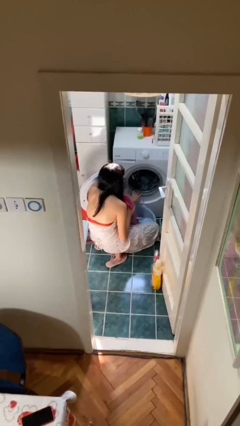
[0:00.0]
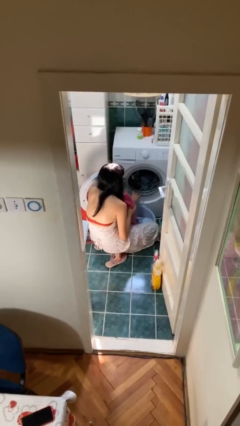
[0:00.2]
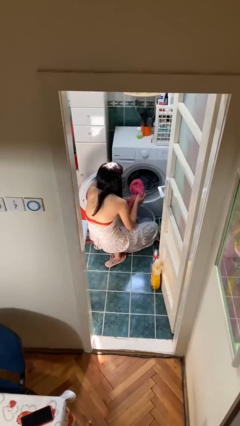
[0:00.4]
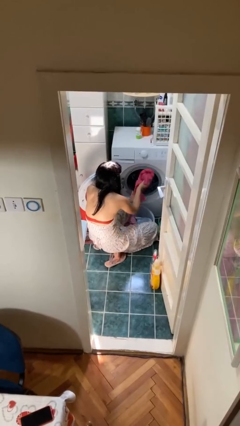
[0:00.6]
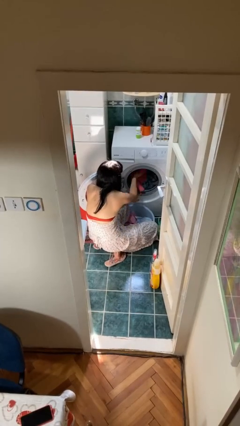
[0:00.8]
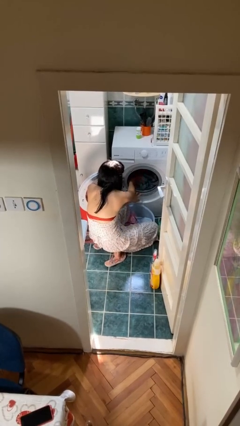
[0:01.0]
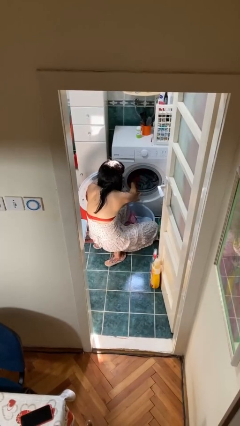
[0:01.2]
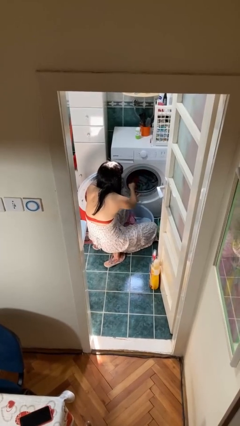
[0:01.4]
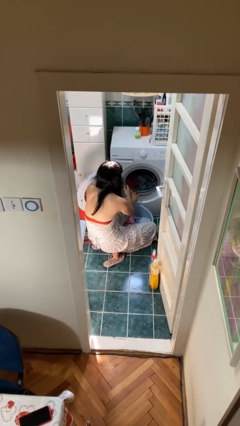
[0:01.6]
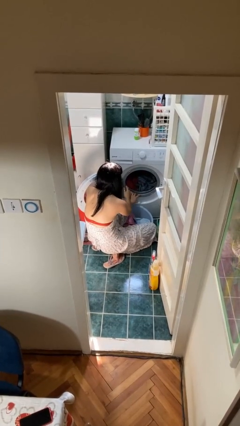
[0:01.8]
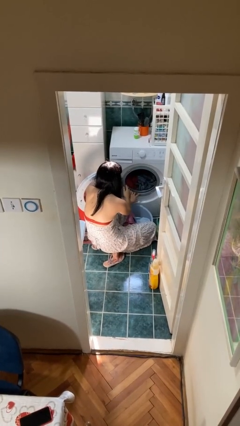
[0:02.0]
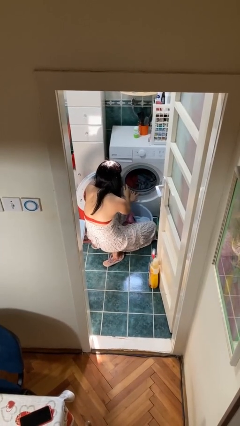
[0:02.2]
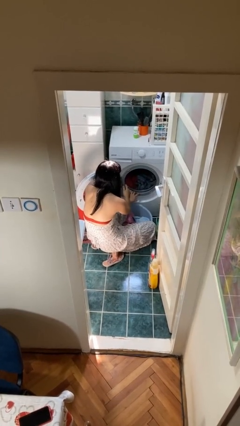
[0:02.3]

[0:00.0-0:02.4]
person loads clotheswasher

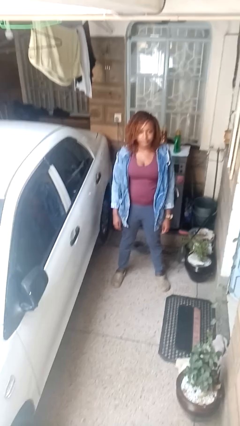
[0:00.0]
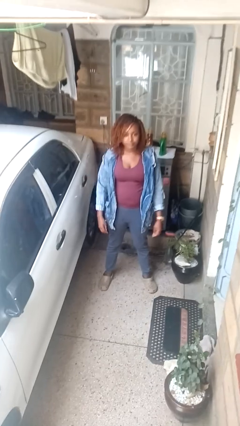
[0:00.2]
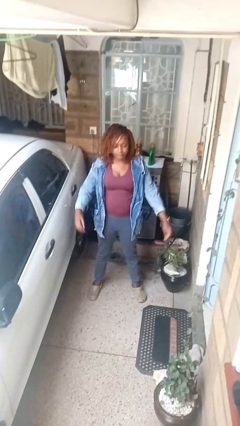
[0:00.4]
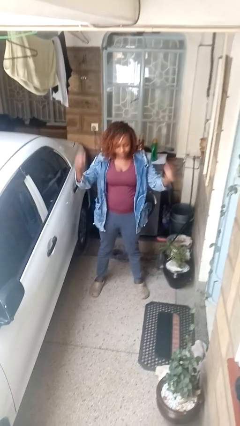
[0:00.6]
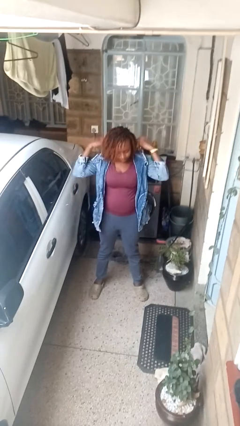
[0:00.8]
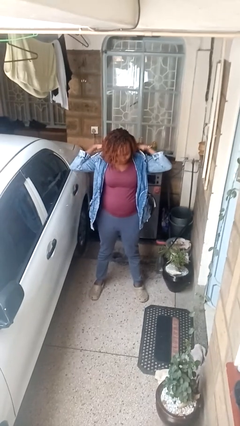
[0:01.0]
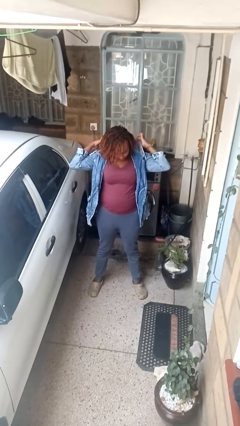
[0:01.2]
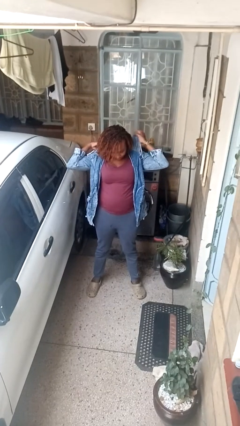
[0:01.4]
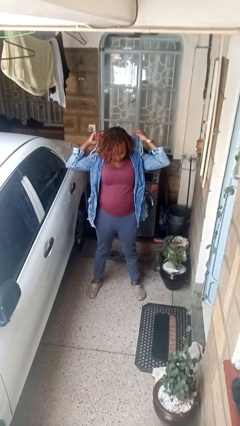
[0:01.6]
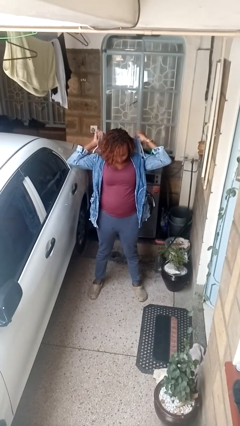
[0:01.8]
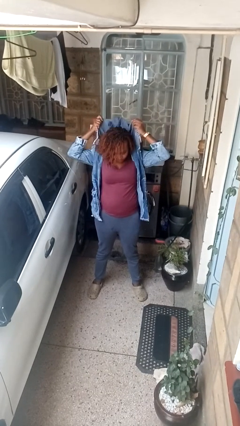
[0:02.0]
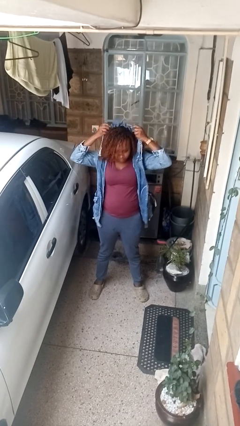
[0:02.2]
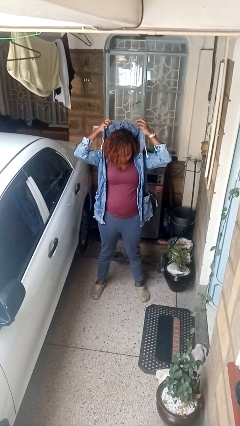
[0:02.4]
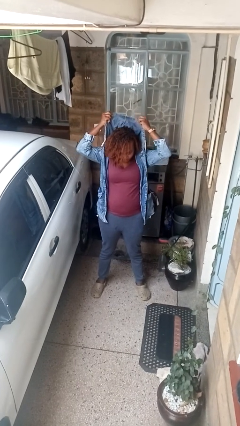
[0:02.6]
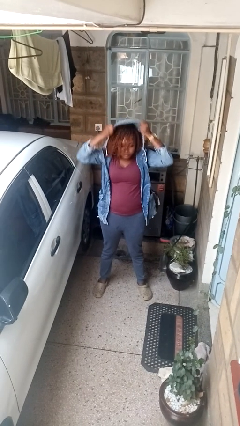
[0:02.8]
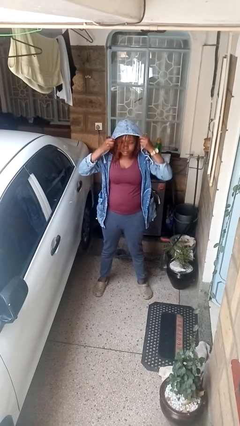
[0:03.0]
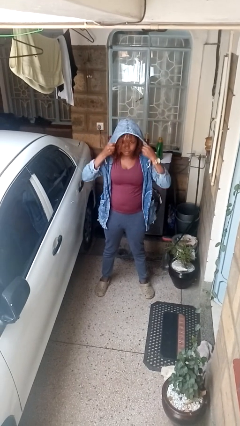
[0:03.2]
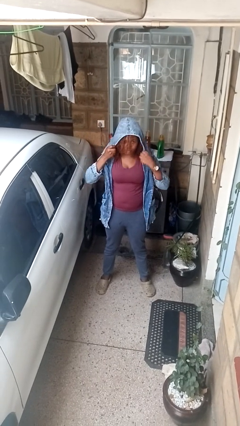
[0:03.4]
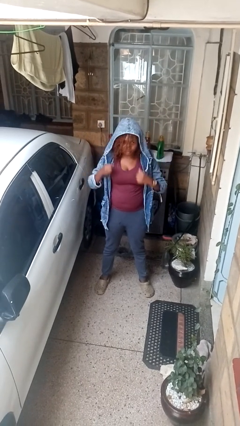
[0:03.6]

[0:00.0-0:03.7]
person puts on hoodie

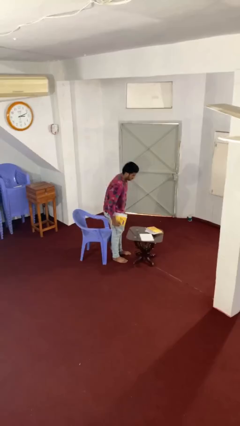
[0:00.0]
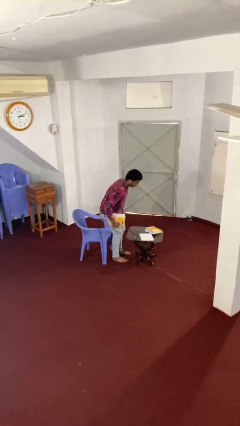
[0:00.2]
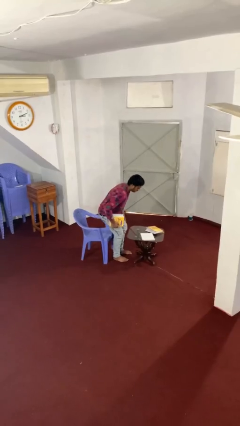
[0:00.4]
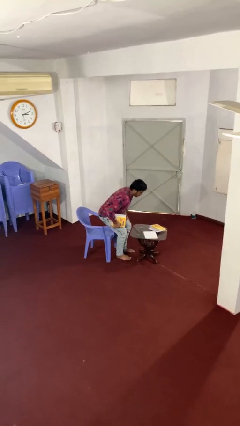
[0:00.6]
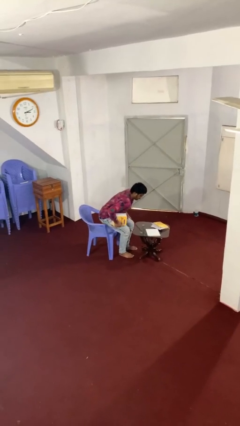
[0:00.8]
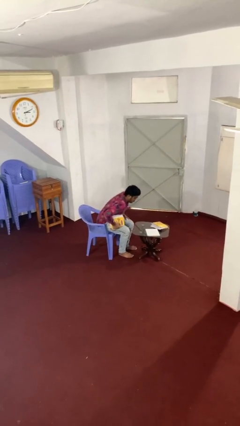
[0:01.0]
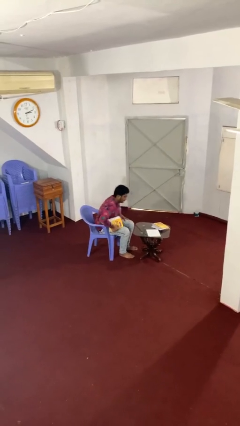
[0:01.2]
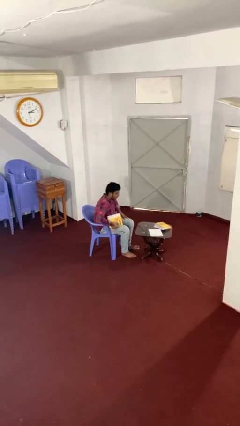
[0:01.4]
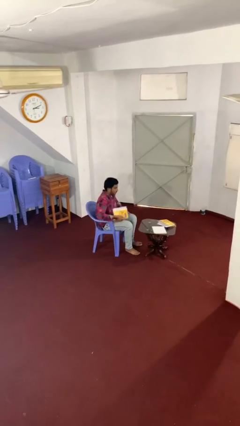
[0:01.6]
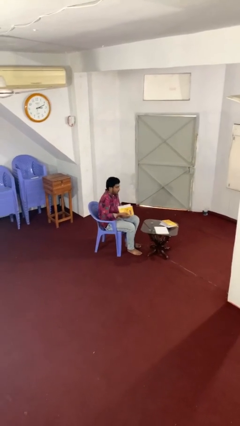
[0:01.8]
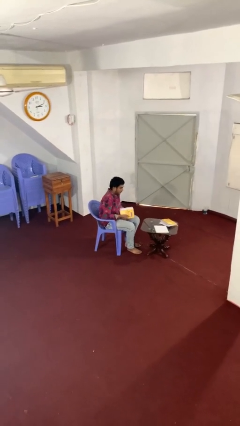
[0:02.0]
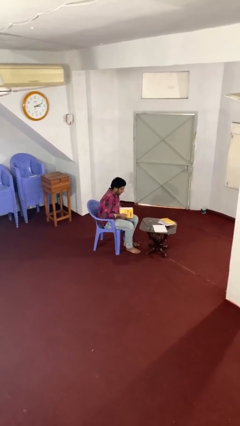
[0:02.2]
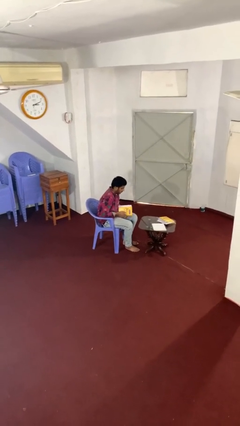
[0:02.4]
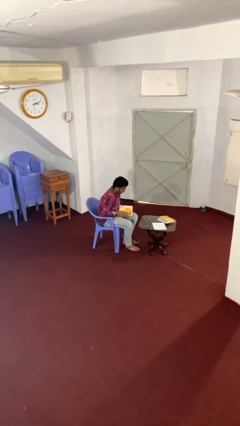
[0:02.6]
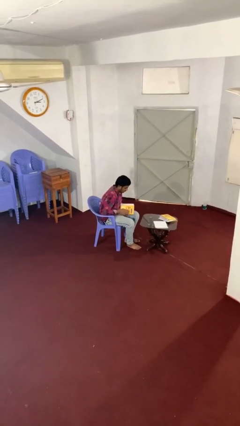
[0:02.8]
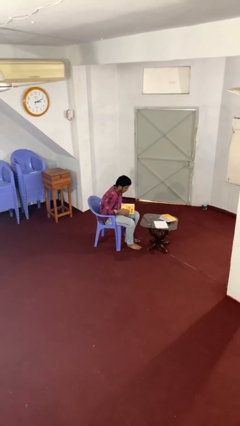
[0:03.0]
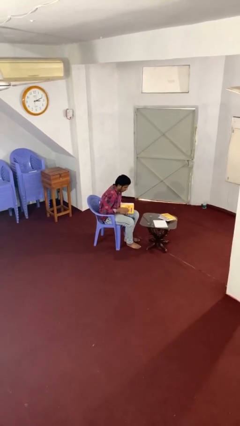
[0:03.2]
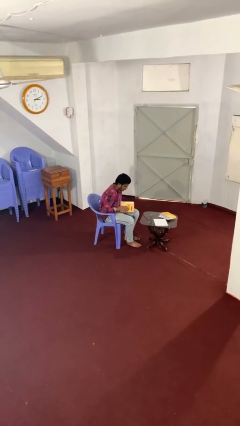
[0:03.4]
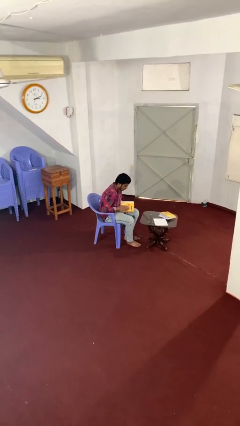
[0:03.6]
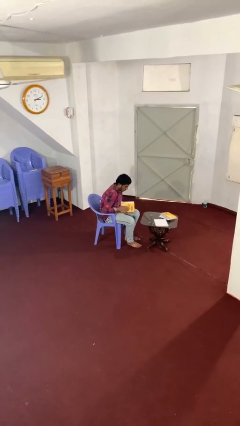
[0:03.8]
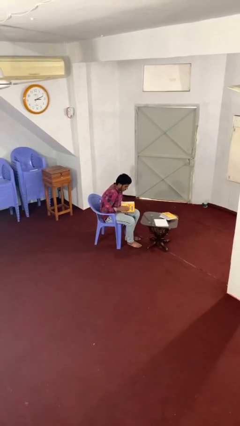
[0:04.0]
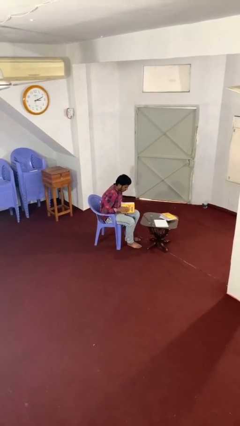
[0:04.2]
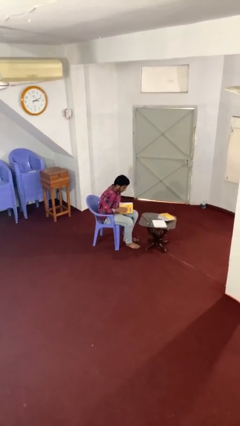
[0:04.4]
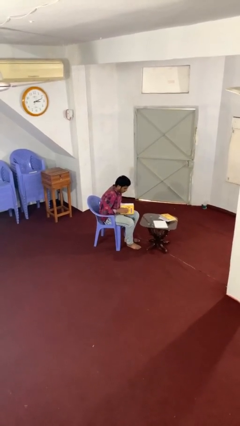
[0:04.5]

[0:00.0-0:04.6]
person sits down

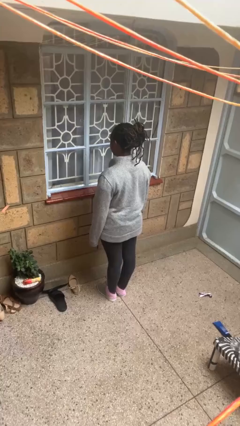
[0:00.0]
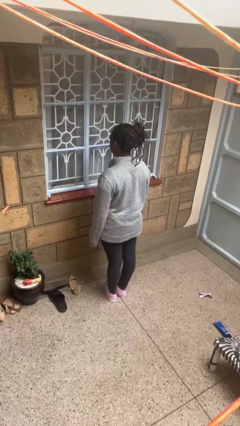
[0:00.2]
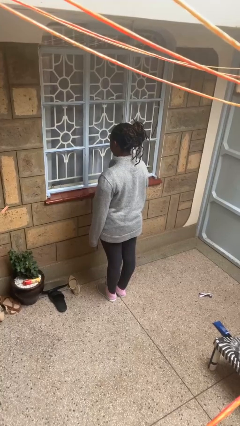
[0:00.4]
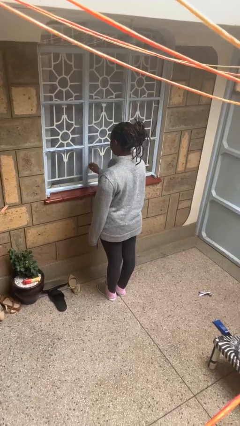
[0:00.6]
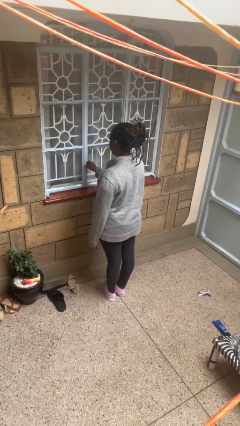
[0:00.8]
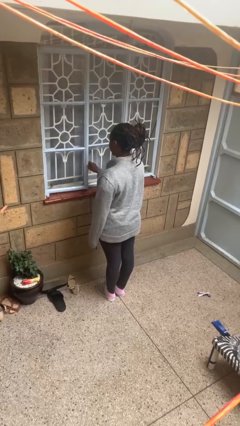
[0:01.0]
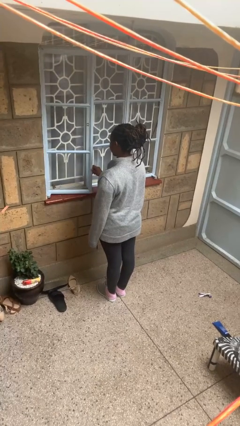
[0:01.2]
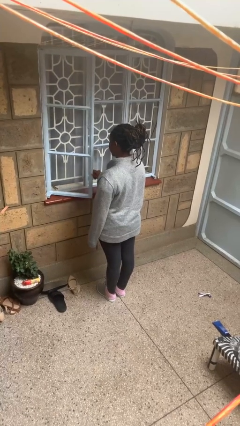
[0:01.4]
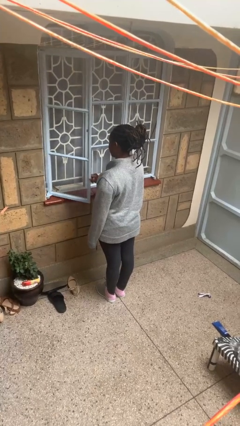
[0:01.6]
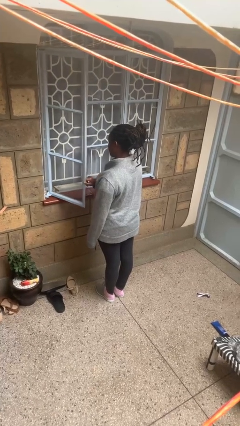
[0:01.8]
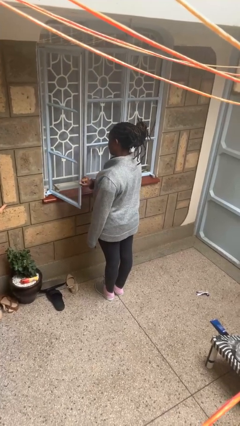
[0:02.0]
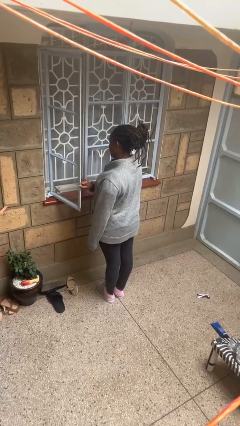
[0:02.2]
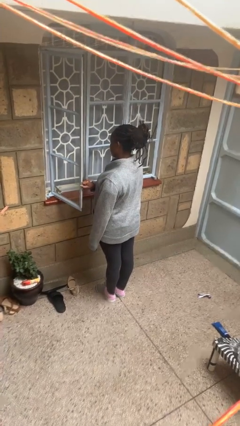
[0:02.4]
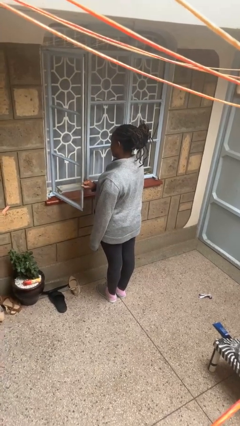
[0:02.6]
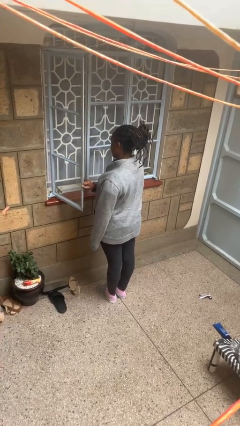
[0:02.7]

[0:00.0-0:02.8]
person opens home window

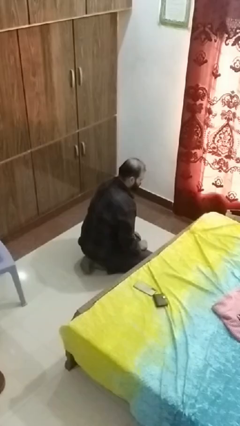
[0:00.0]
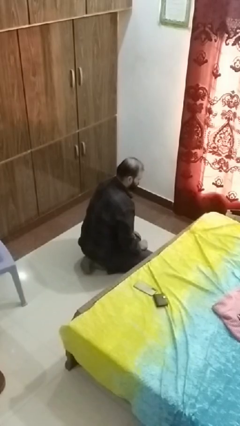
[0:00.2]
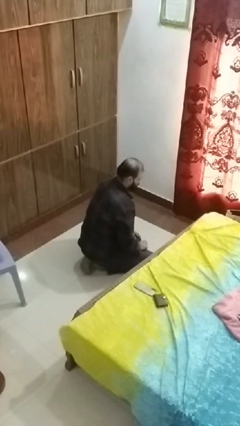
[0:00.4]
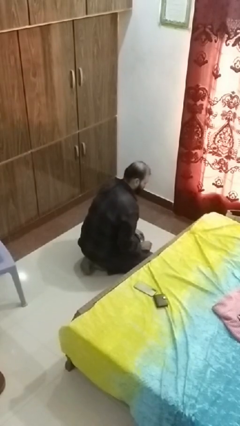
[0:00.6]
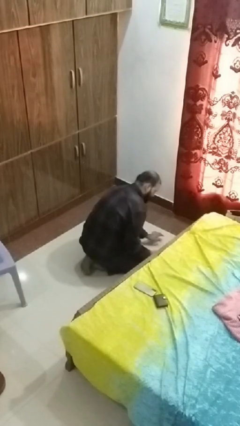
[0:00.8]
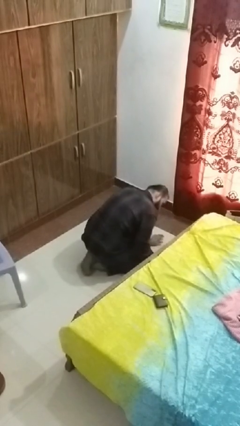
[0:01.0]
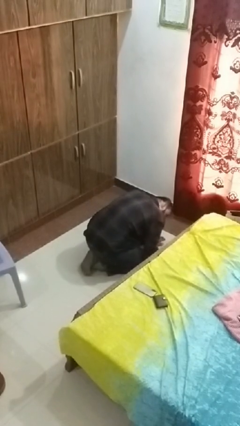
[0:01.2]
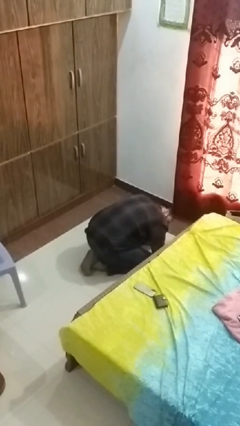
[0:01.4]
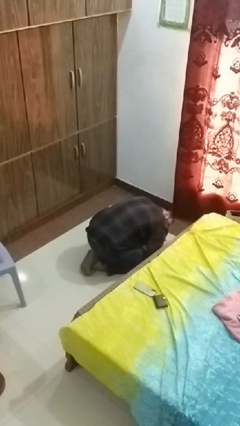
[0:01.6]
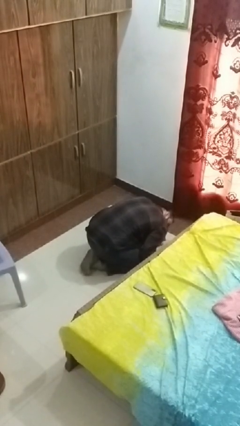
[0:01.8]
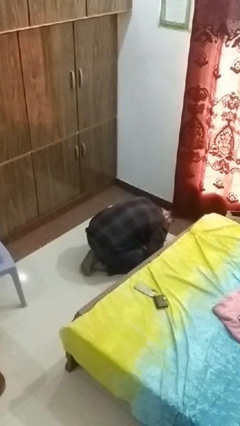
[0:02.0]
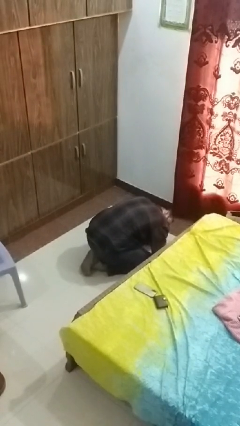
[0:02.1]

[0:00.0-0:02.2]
person searches under bed

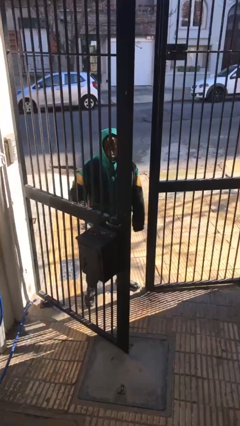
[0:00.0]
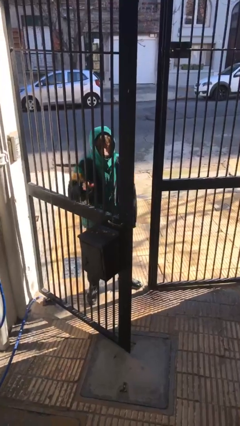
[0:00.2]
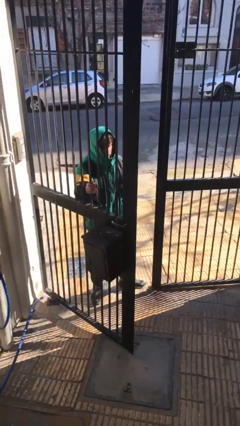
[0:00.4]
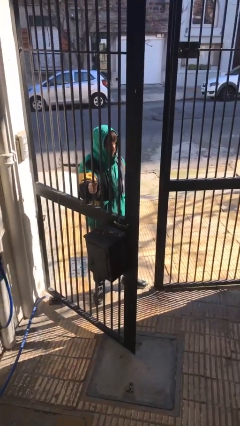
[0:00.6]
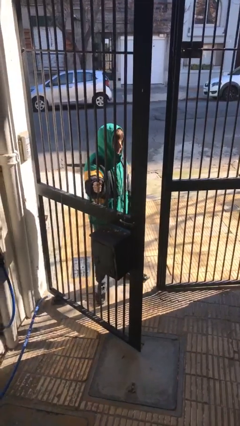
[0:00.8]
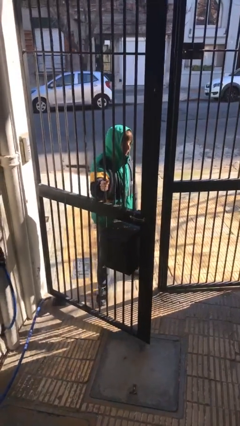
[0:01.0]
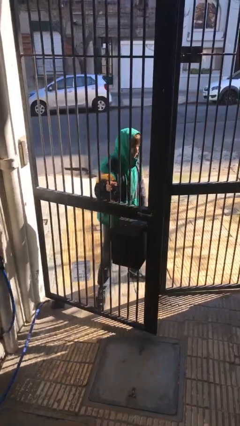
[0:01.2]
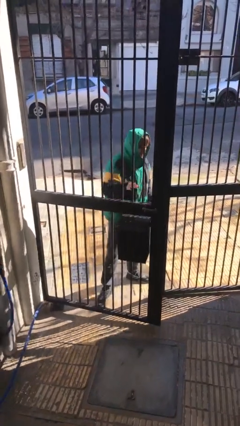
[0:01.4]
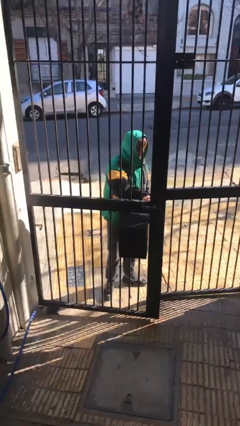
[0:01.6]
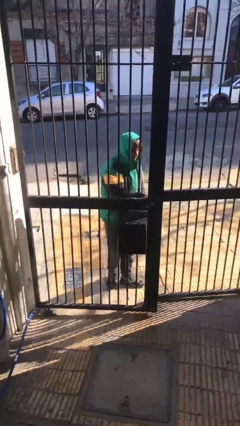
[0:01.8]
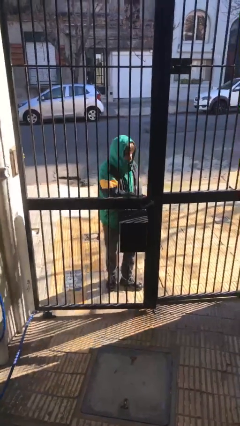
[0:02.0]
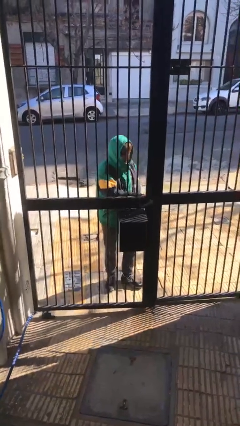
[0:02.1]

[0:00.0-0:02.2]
person closes gate
